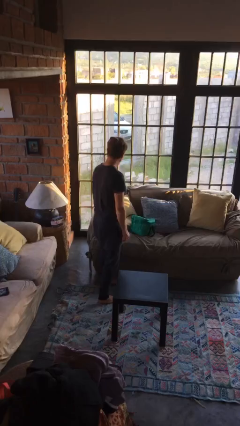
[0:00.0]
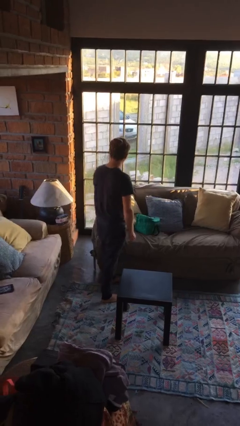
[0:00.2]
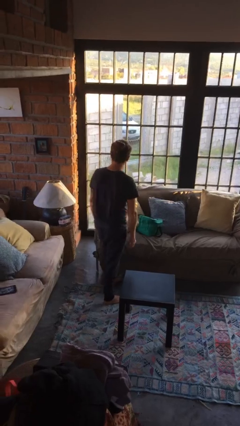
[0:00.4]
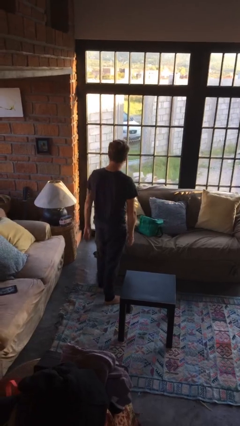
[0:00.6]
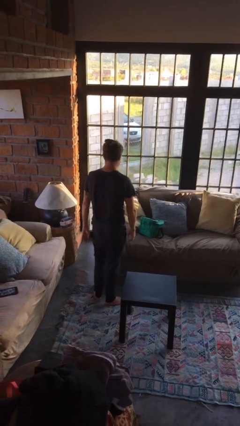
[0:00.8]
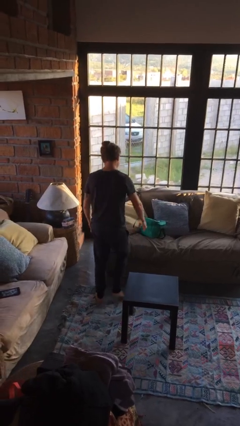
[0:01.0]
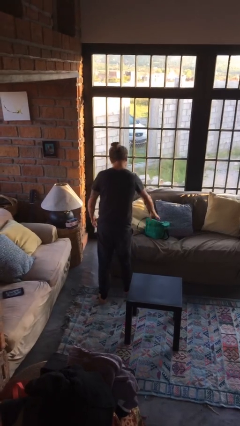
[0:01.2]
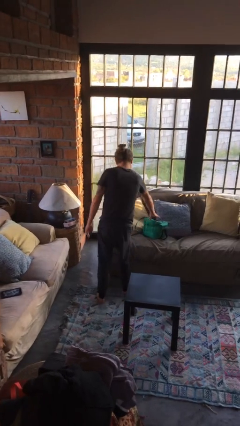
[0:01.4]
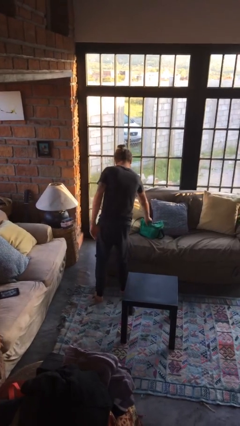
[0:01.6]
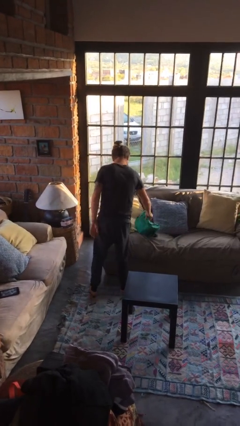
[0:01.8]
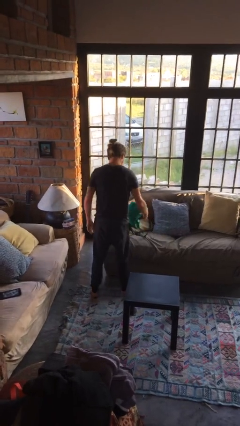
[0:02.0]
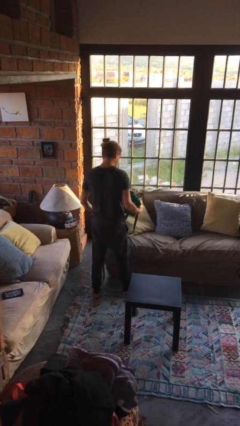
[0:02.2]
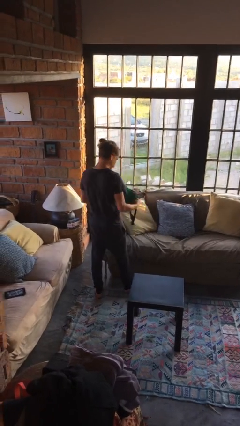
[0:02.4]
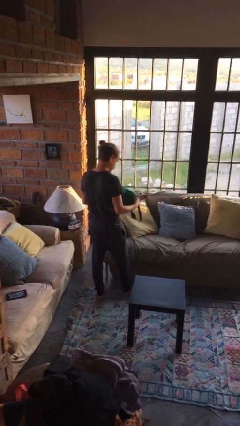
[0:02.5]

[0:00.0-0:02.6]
person picks up object from couch

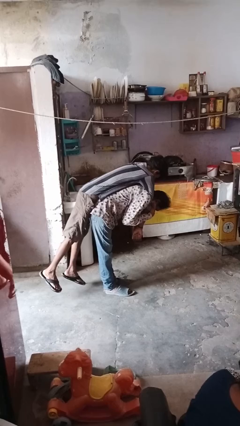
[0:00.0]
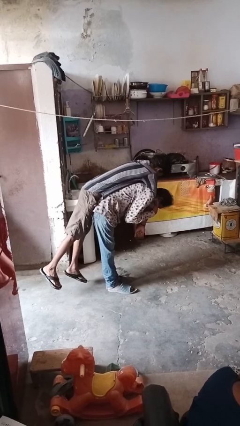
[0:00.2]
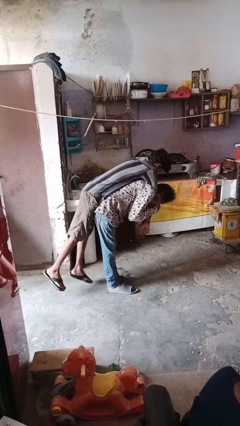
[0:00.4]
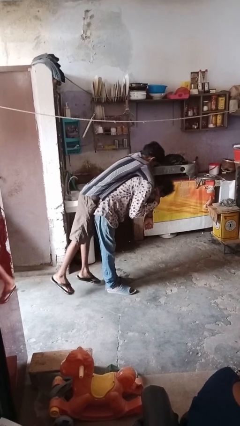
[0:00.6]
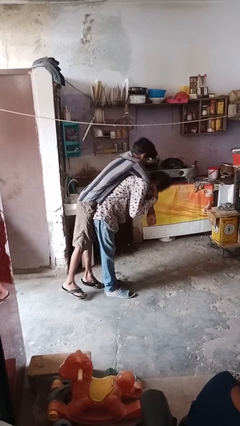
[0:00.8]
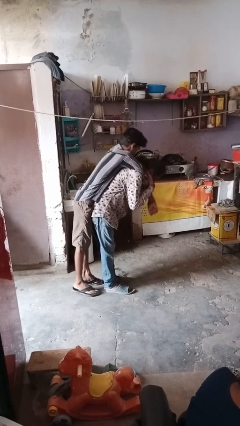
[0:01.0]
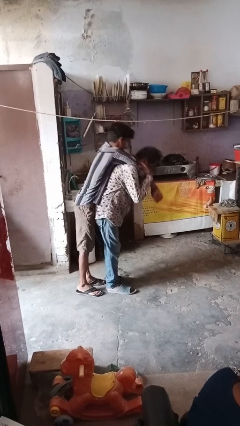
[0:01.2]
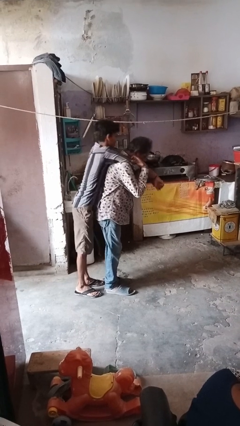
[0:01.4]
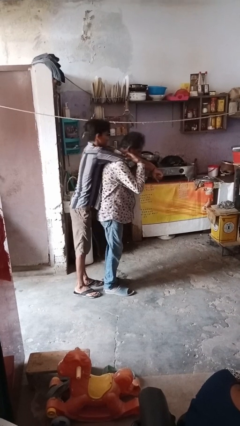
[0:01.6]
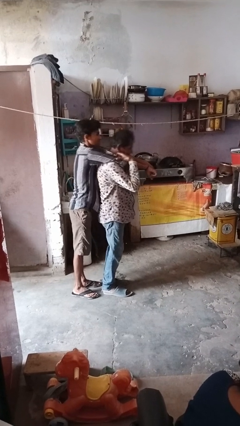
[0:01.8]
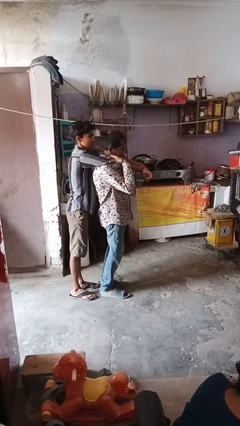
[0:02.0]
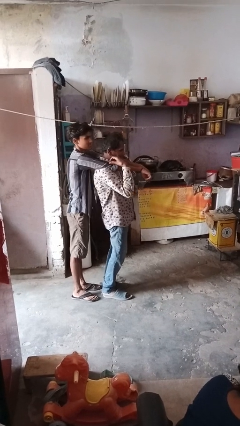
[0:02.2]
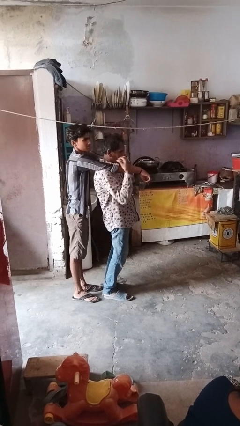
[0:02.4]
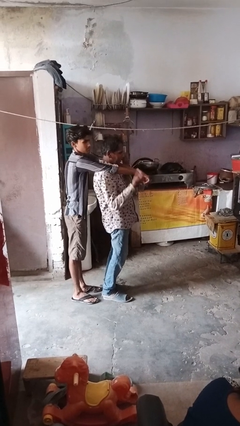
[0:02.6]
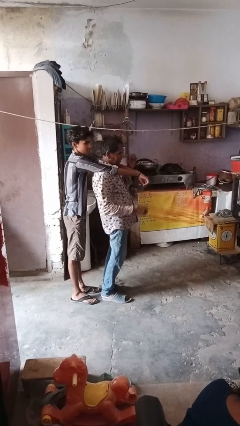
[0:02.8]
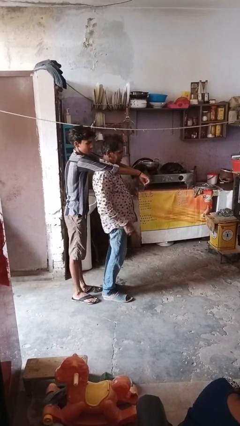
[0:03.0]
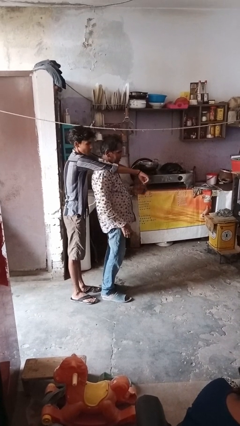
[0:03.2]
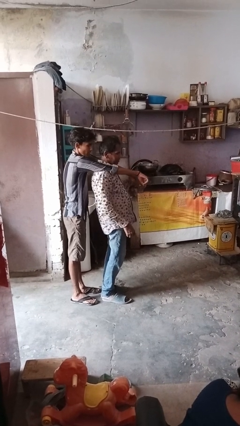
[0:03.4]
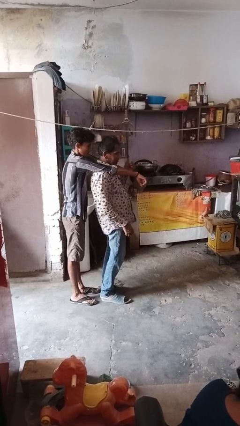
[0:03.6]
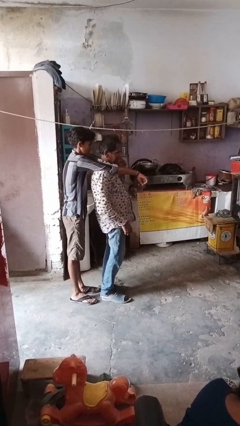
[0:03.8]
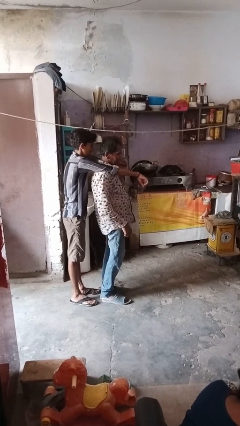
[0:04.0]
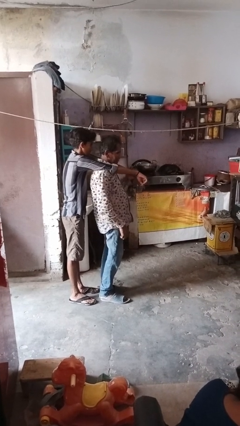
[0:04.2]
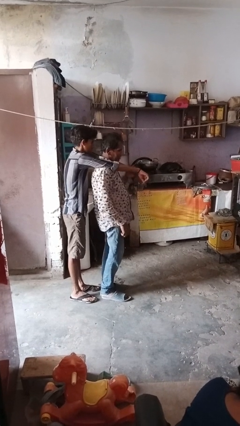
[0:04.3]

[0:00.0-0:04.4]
person puts down person

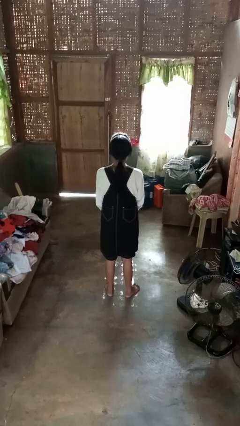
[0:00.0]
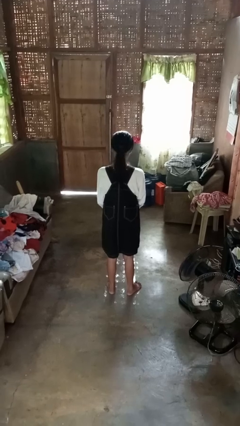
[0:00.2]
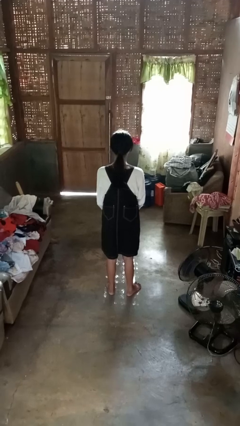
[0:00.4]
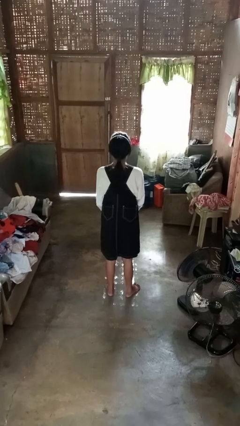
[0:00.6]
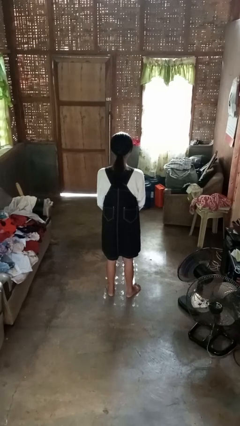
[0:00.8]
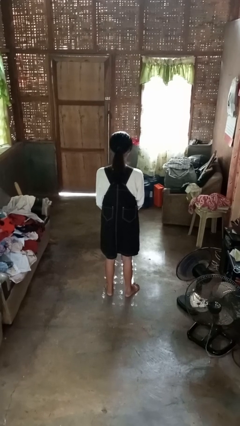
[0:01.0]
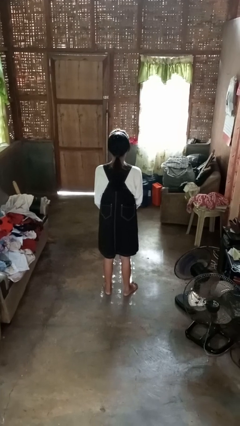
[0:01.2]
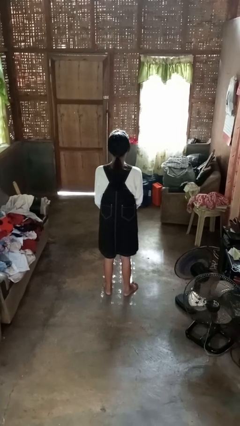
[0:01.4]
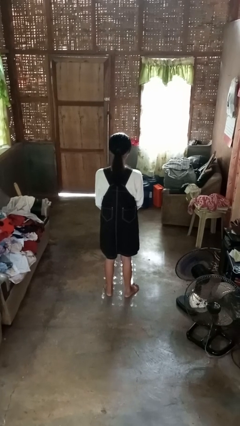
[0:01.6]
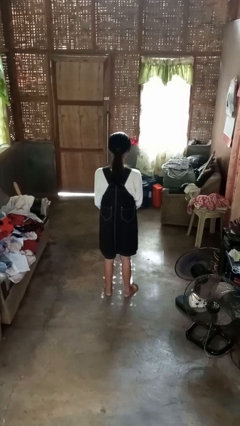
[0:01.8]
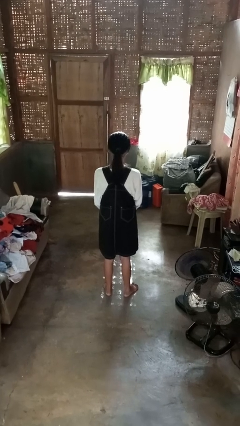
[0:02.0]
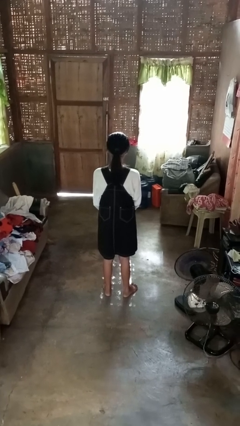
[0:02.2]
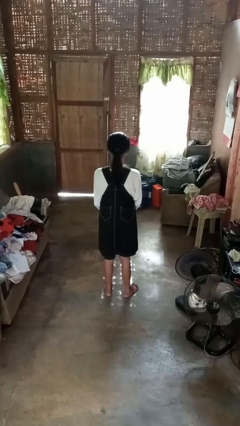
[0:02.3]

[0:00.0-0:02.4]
person nods head

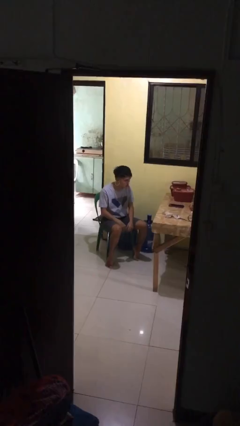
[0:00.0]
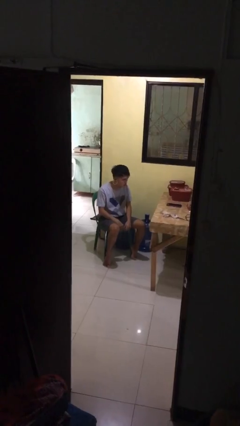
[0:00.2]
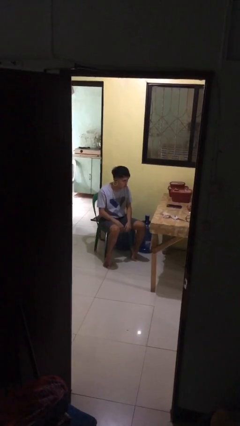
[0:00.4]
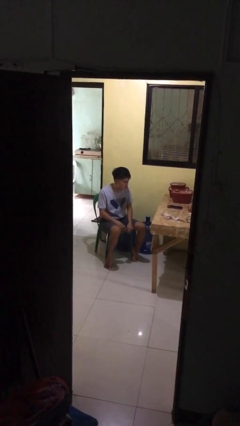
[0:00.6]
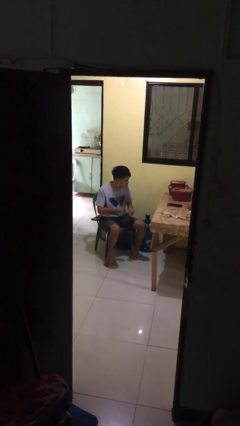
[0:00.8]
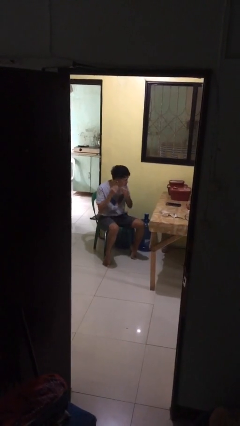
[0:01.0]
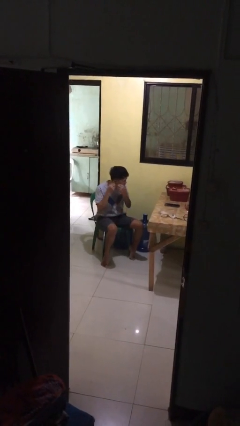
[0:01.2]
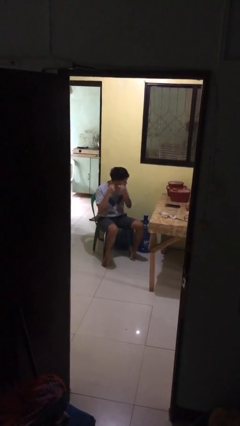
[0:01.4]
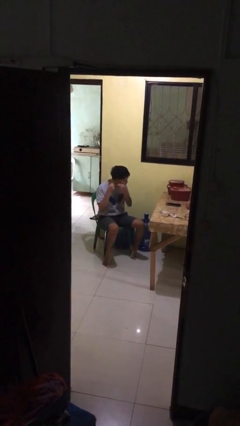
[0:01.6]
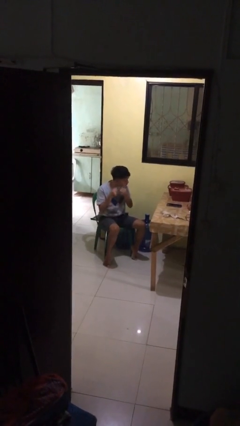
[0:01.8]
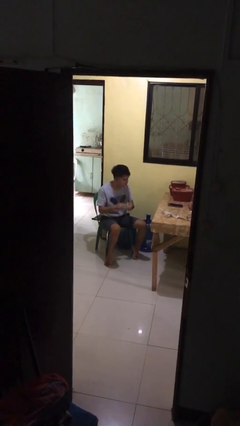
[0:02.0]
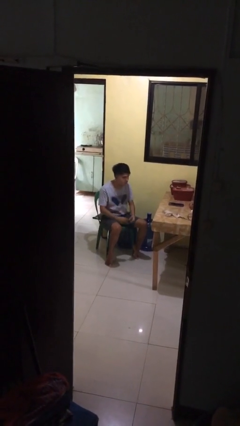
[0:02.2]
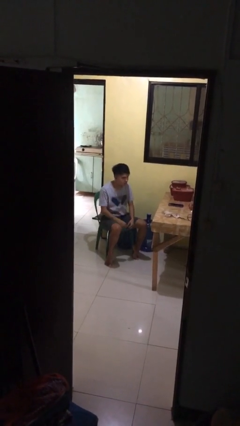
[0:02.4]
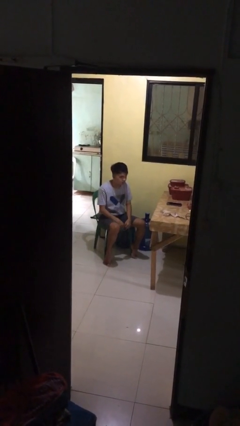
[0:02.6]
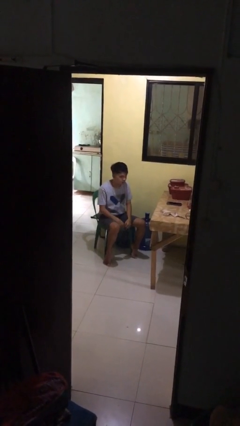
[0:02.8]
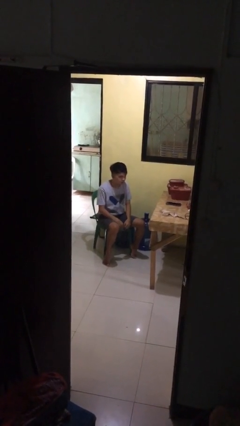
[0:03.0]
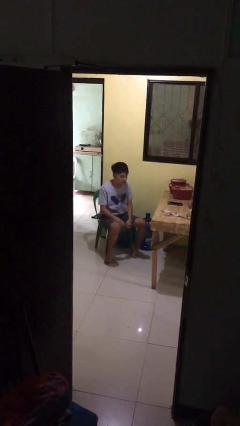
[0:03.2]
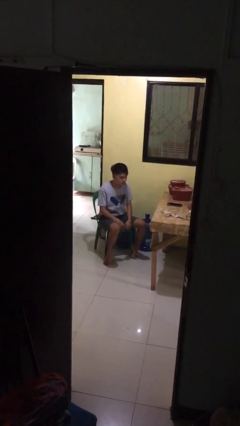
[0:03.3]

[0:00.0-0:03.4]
person takes off earrings

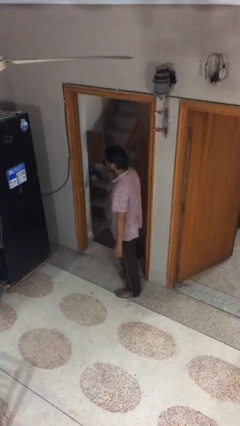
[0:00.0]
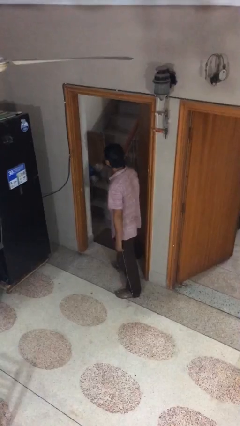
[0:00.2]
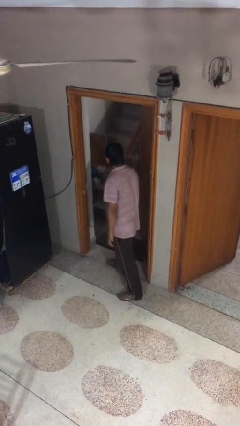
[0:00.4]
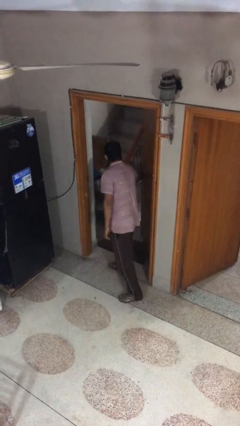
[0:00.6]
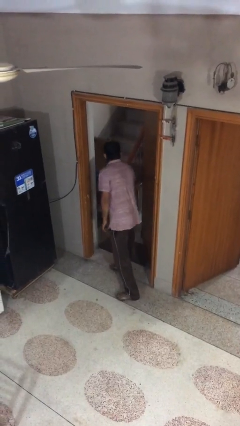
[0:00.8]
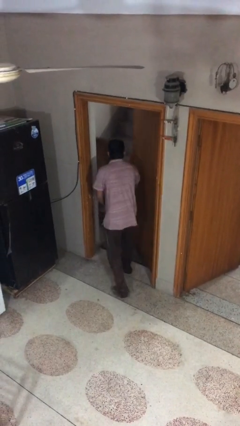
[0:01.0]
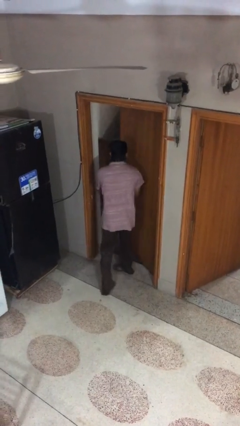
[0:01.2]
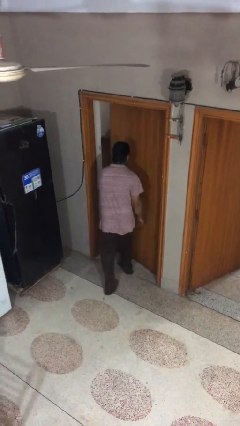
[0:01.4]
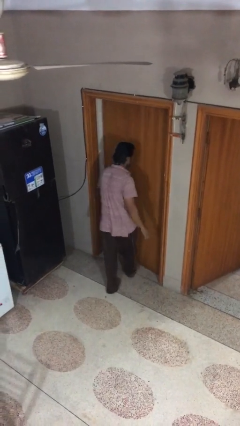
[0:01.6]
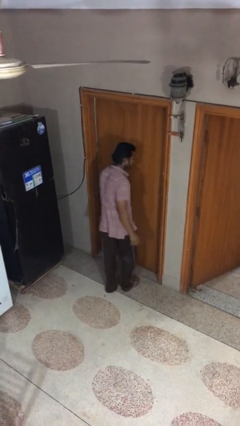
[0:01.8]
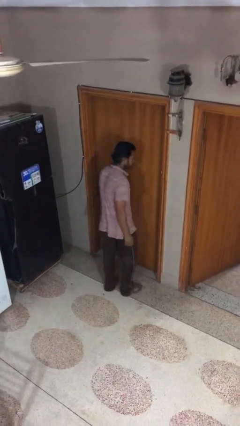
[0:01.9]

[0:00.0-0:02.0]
person closes facility door

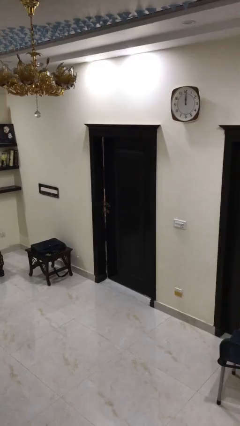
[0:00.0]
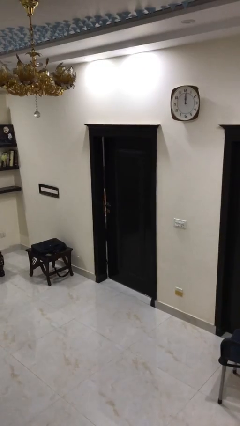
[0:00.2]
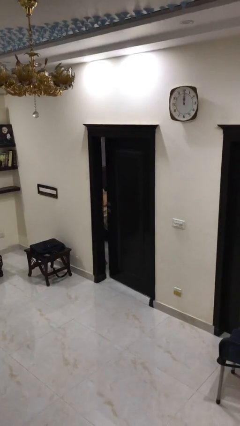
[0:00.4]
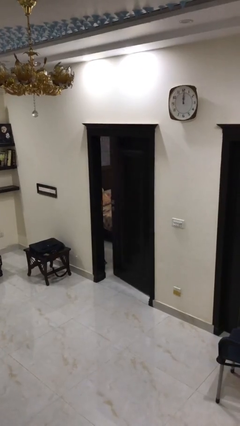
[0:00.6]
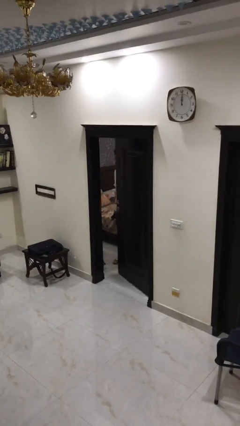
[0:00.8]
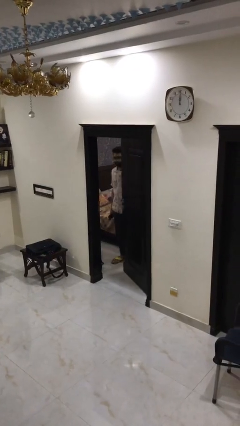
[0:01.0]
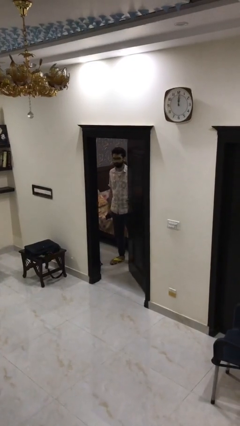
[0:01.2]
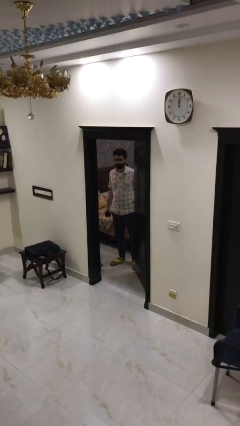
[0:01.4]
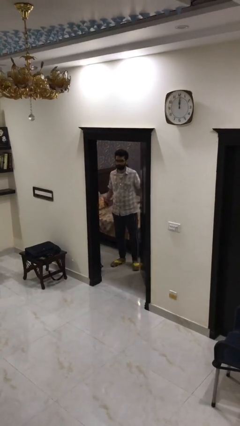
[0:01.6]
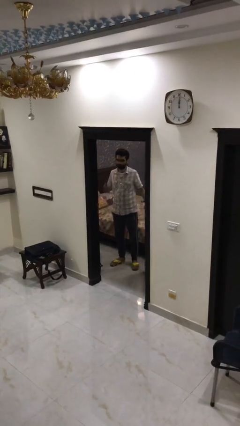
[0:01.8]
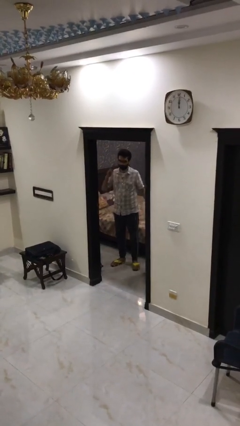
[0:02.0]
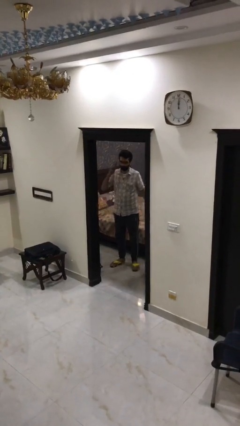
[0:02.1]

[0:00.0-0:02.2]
person opens facility door

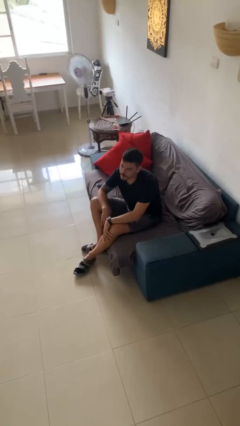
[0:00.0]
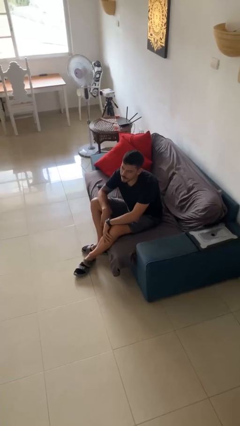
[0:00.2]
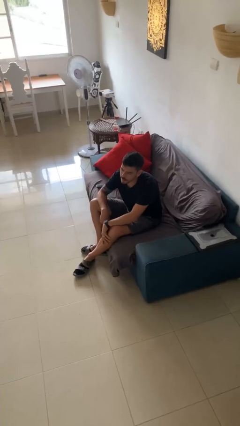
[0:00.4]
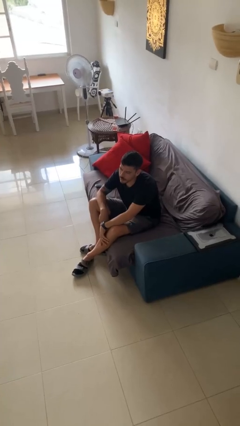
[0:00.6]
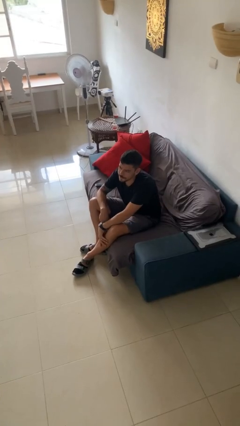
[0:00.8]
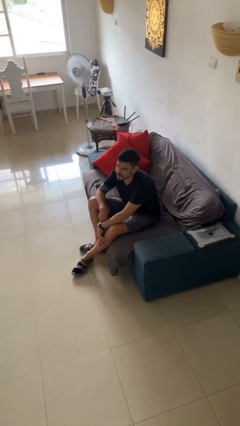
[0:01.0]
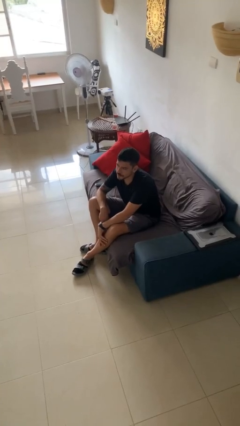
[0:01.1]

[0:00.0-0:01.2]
person gestures lower hand
